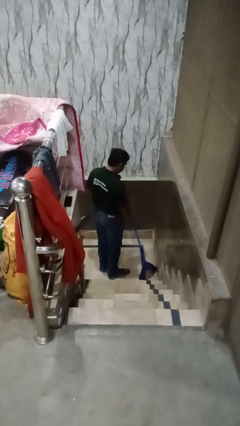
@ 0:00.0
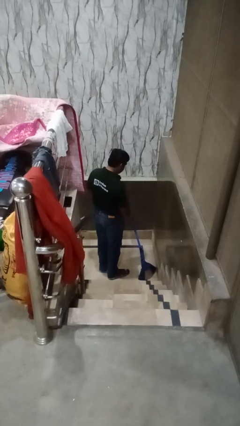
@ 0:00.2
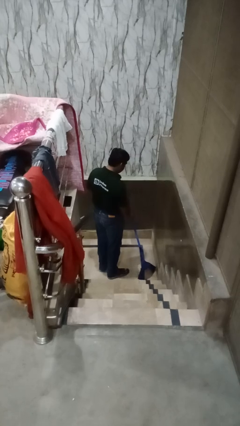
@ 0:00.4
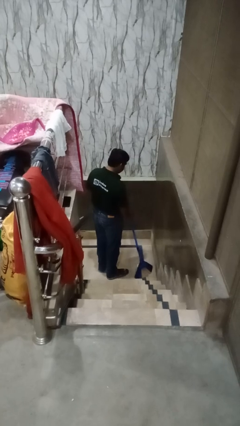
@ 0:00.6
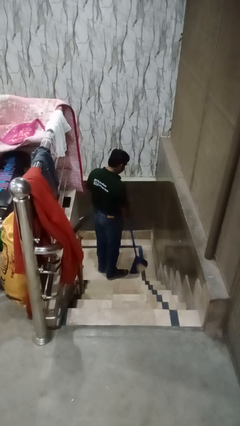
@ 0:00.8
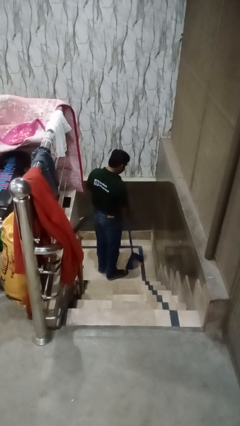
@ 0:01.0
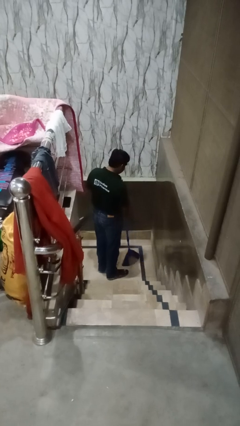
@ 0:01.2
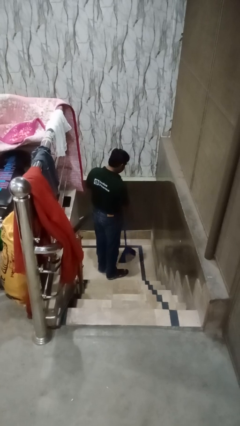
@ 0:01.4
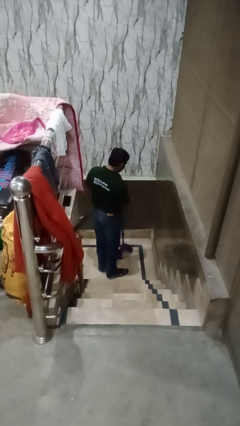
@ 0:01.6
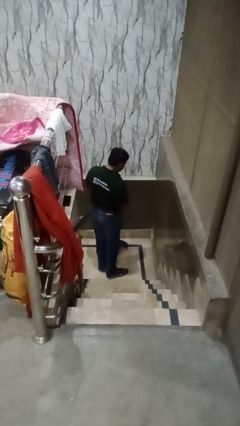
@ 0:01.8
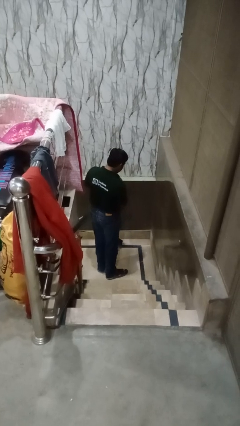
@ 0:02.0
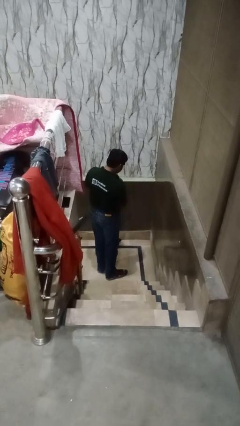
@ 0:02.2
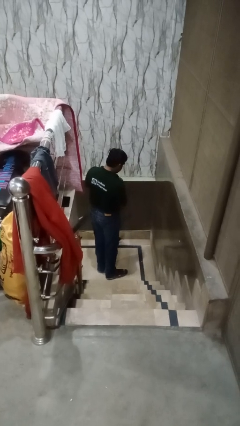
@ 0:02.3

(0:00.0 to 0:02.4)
person sweeps floor

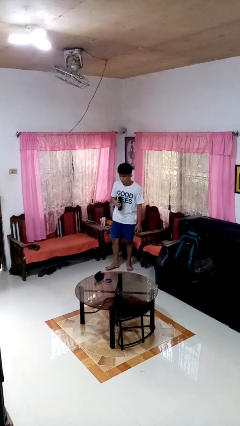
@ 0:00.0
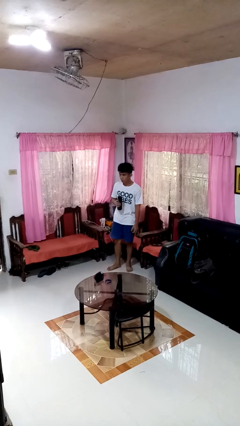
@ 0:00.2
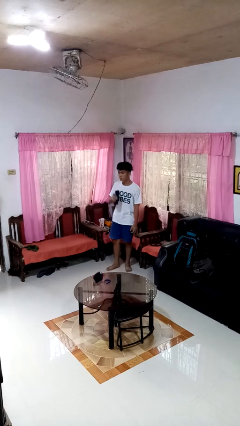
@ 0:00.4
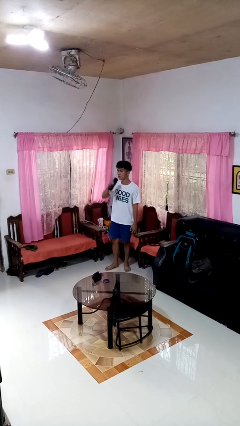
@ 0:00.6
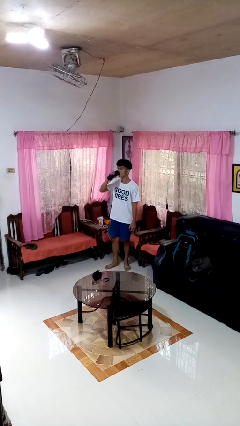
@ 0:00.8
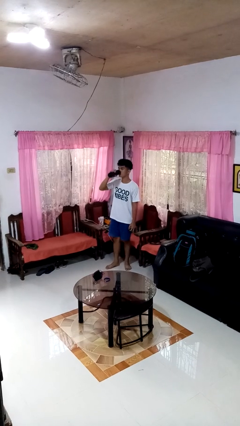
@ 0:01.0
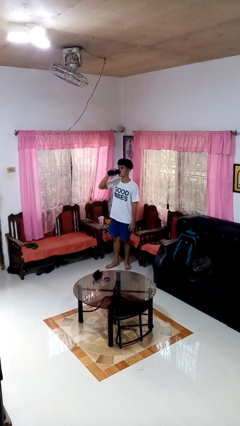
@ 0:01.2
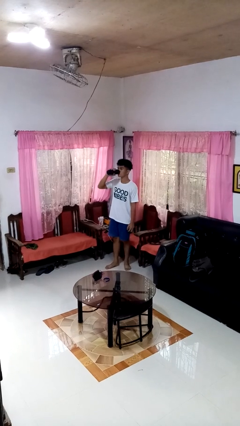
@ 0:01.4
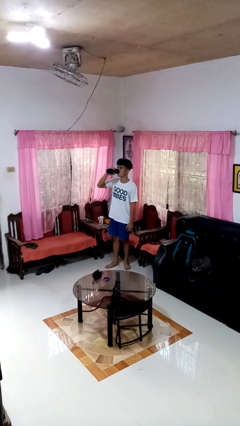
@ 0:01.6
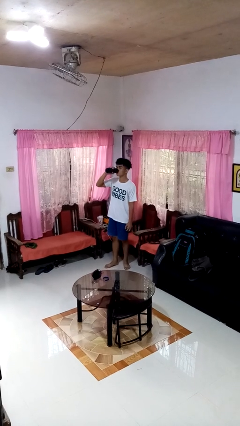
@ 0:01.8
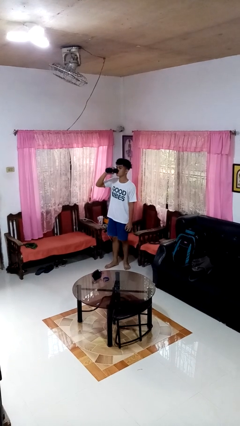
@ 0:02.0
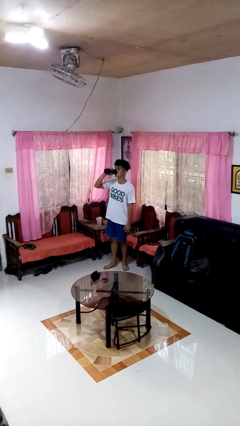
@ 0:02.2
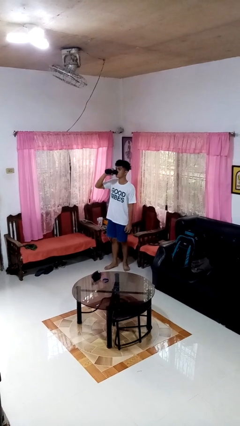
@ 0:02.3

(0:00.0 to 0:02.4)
person drinks from bottle

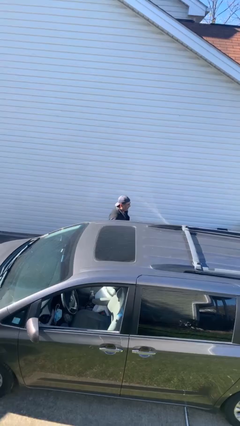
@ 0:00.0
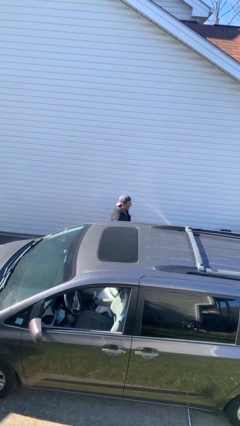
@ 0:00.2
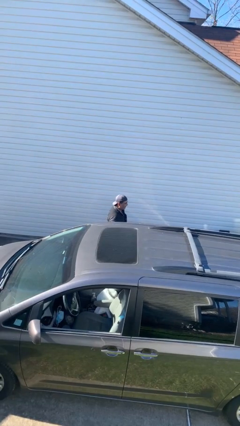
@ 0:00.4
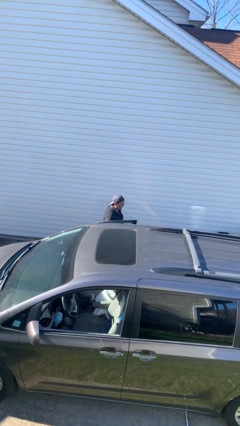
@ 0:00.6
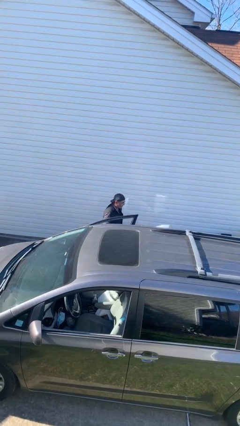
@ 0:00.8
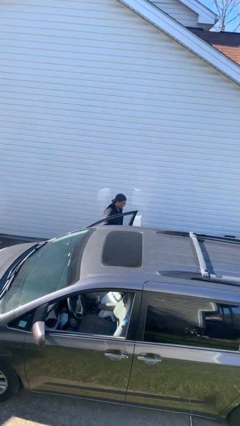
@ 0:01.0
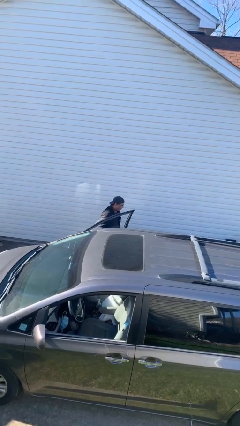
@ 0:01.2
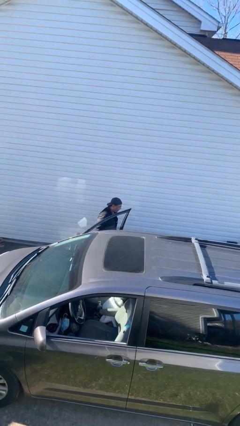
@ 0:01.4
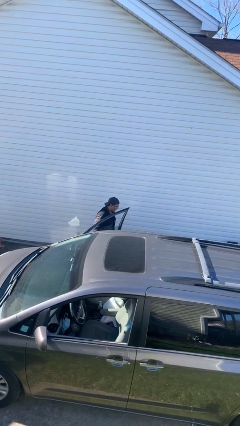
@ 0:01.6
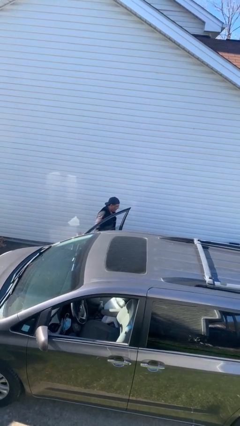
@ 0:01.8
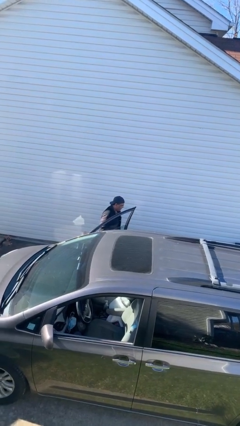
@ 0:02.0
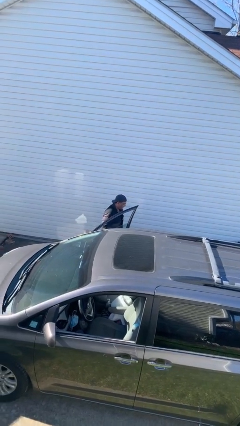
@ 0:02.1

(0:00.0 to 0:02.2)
person opens car door

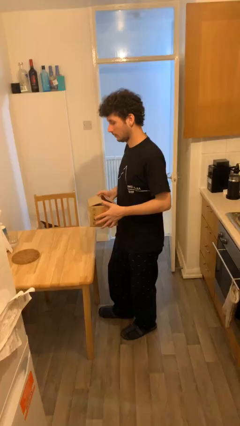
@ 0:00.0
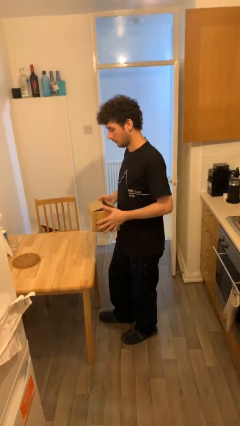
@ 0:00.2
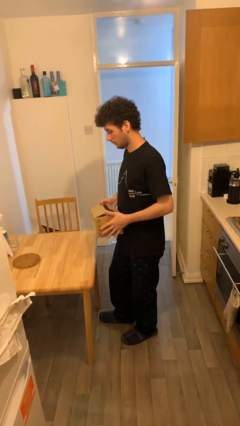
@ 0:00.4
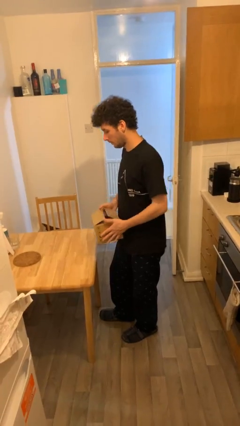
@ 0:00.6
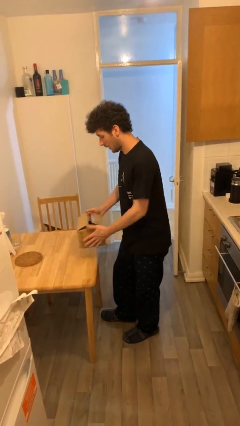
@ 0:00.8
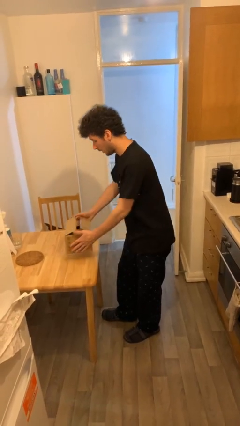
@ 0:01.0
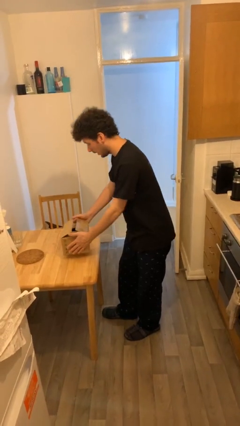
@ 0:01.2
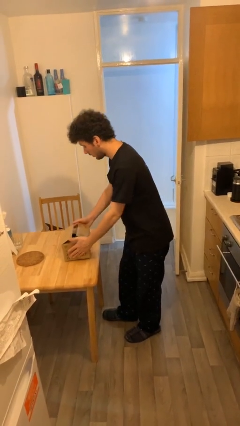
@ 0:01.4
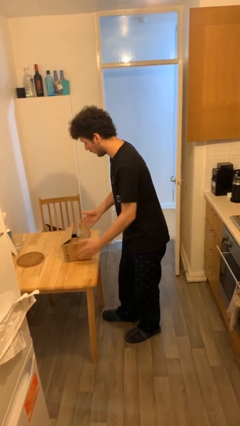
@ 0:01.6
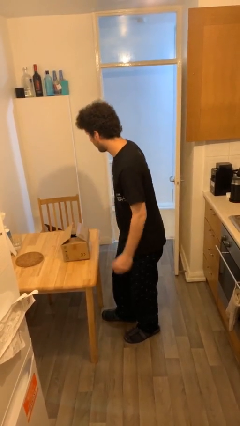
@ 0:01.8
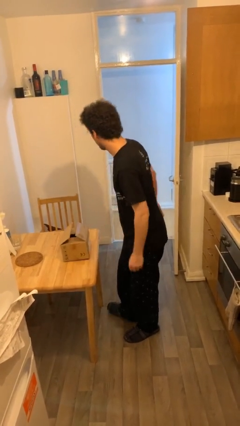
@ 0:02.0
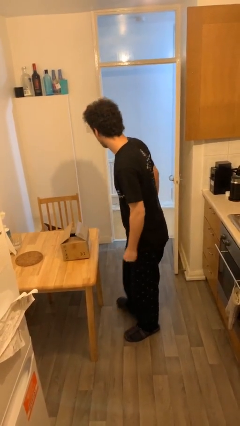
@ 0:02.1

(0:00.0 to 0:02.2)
person puts down object on table

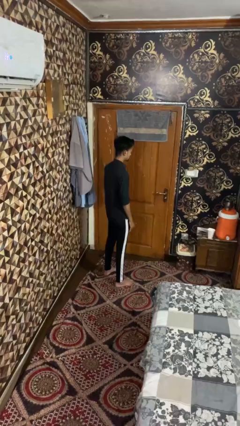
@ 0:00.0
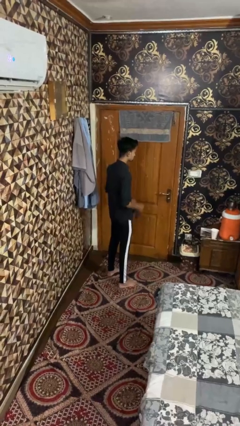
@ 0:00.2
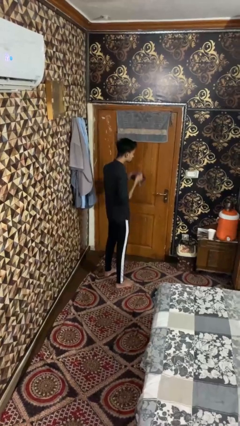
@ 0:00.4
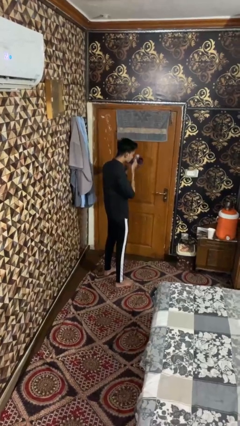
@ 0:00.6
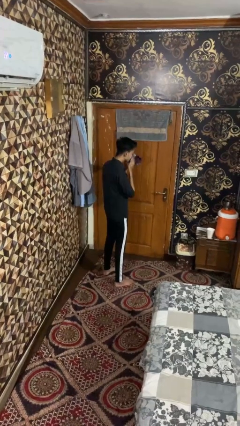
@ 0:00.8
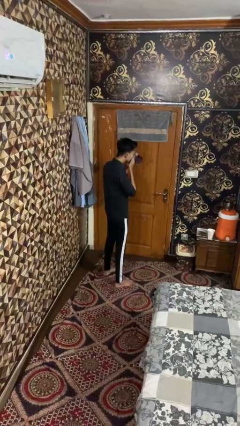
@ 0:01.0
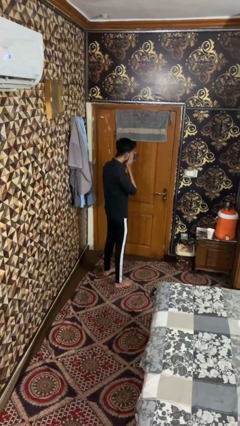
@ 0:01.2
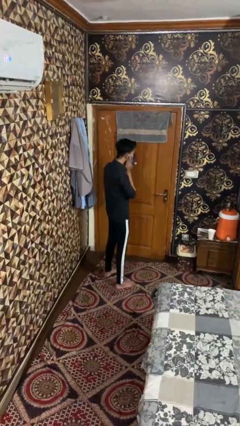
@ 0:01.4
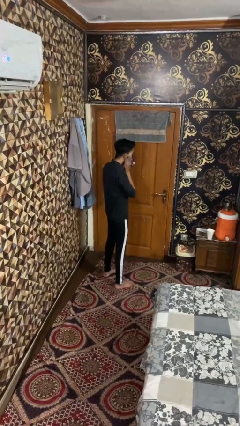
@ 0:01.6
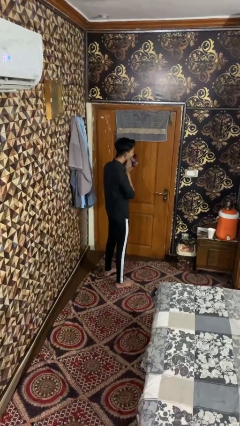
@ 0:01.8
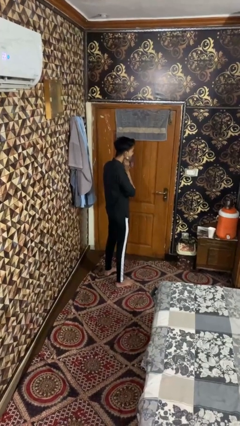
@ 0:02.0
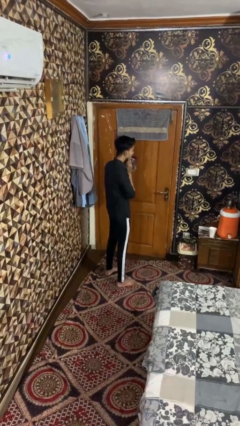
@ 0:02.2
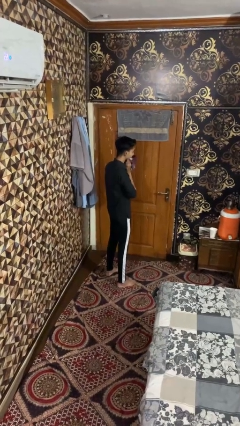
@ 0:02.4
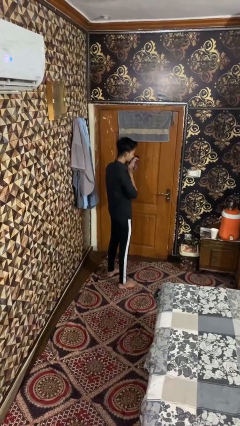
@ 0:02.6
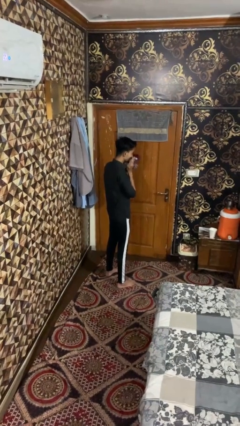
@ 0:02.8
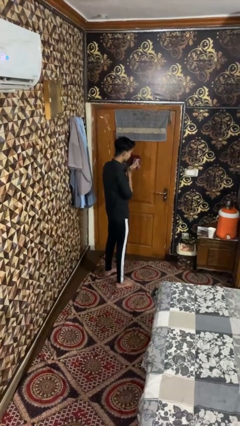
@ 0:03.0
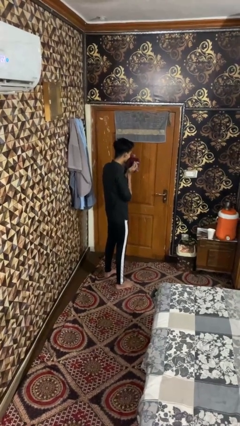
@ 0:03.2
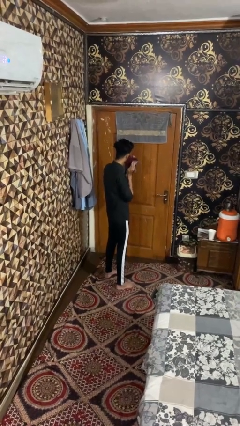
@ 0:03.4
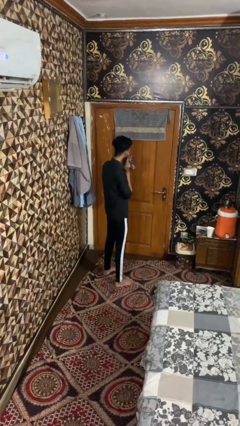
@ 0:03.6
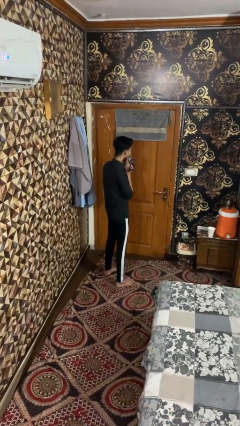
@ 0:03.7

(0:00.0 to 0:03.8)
person wipes mouth with napkin

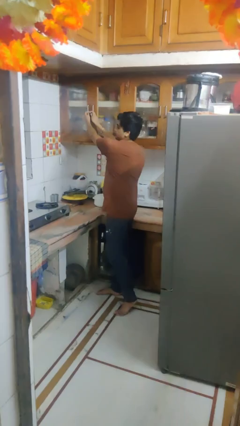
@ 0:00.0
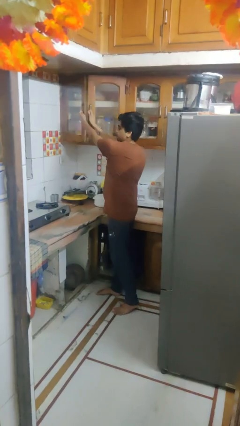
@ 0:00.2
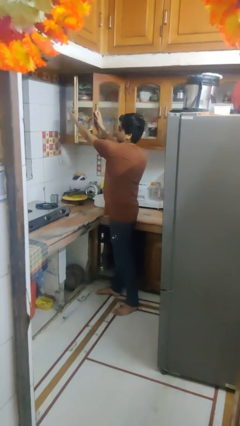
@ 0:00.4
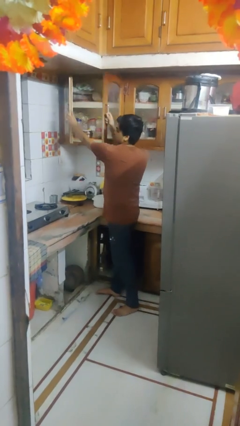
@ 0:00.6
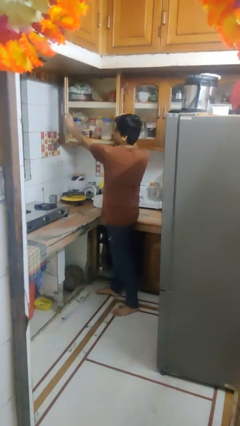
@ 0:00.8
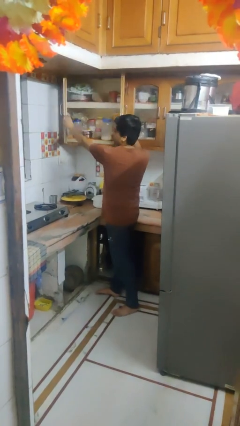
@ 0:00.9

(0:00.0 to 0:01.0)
person opens cabinet

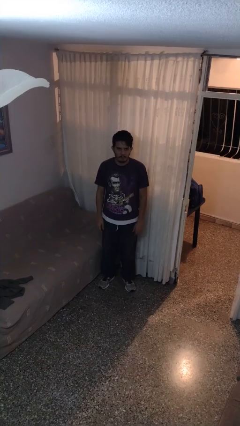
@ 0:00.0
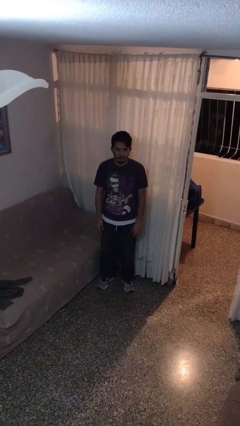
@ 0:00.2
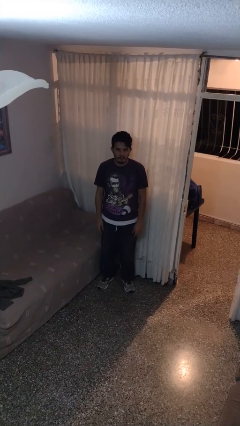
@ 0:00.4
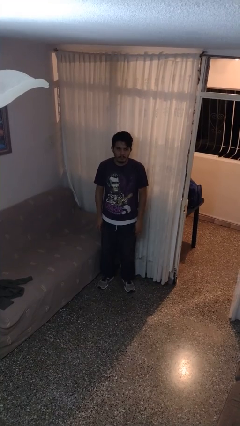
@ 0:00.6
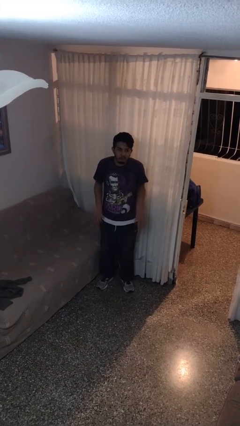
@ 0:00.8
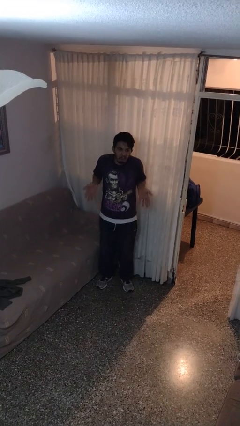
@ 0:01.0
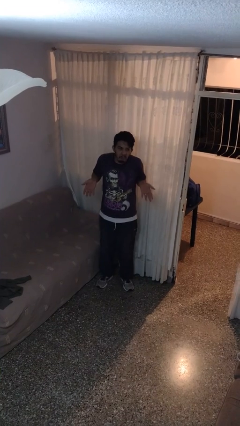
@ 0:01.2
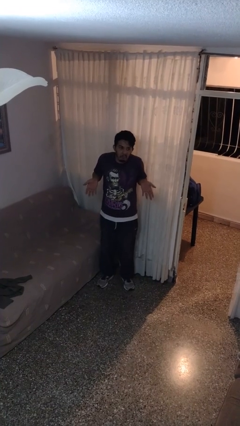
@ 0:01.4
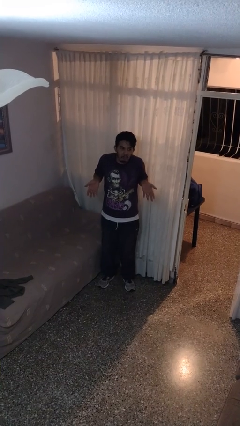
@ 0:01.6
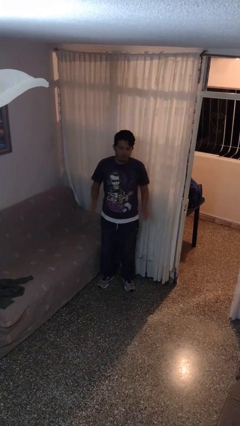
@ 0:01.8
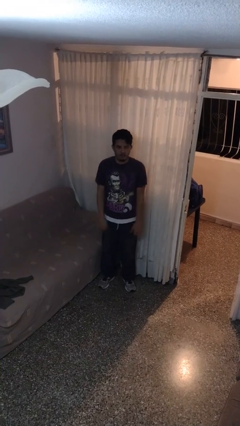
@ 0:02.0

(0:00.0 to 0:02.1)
person shrugs

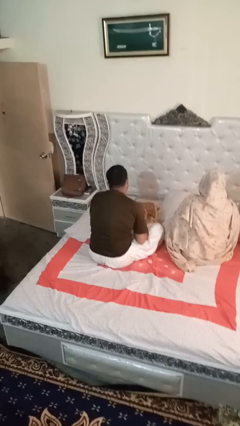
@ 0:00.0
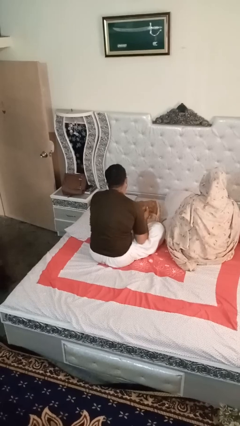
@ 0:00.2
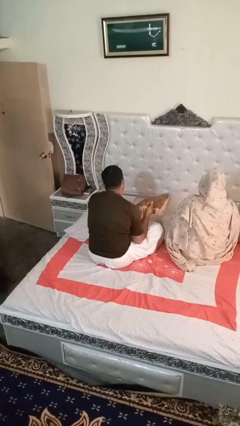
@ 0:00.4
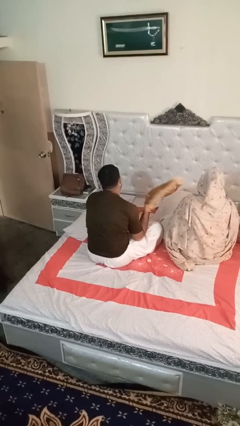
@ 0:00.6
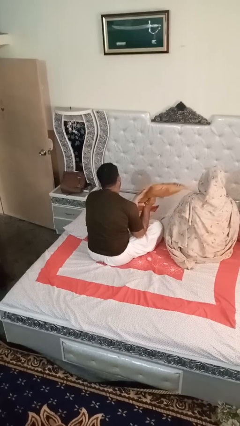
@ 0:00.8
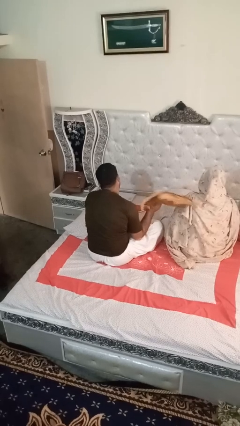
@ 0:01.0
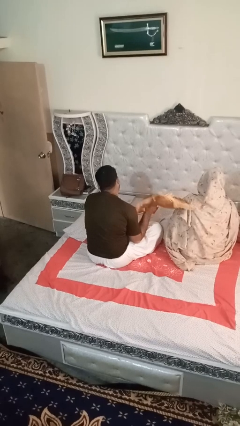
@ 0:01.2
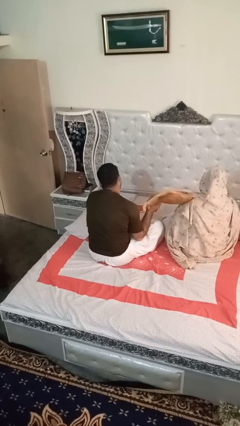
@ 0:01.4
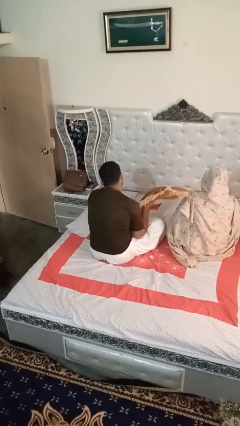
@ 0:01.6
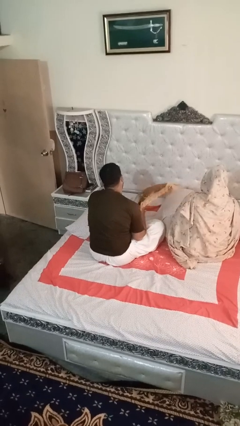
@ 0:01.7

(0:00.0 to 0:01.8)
person hits person with pillow
